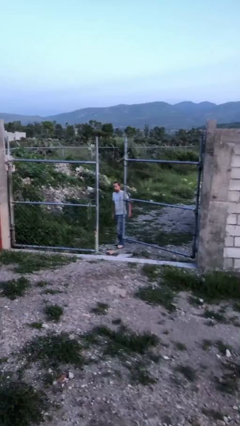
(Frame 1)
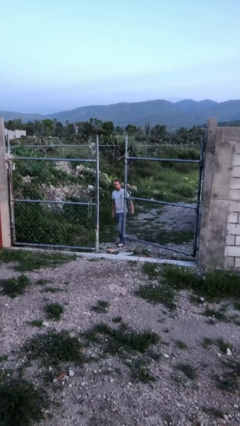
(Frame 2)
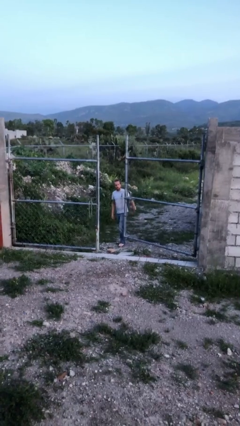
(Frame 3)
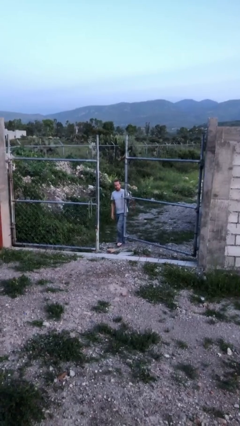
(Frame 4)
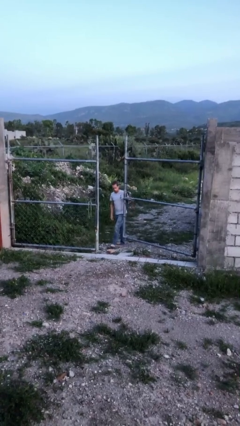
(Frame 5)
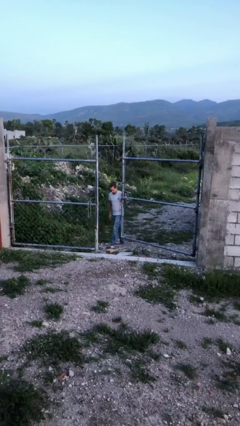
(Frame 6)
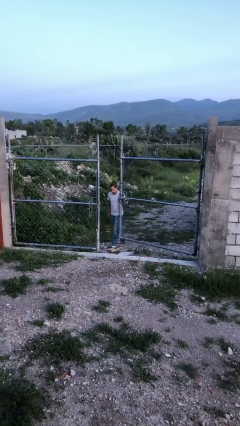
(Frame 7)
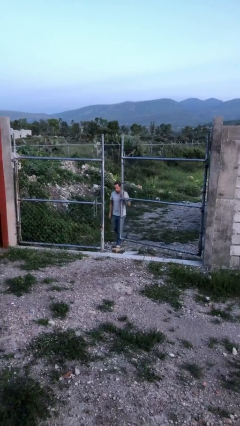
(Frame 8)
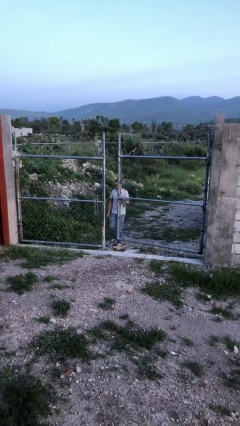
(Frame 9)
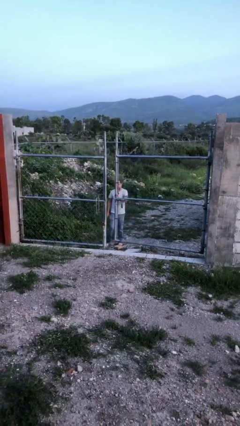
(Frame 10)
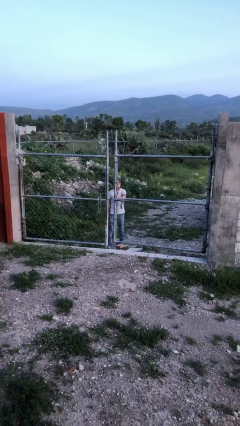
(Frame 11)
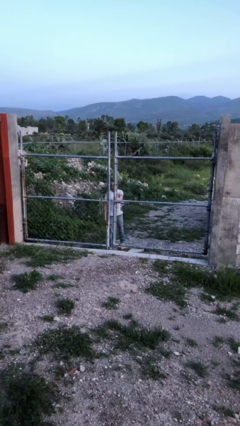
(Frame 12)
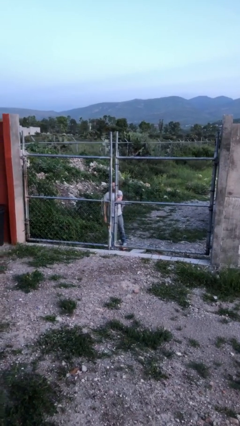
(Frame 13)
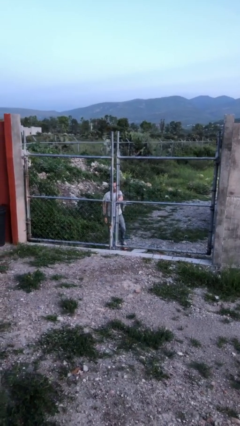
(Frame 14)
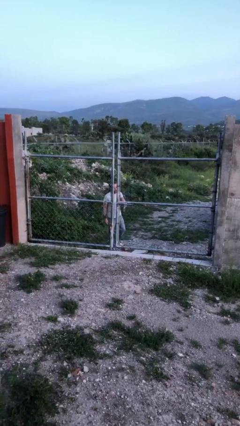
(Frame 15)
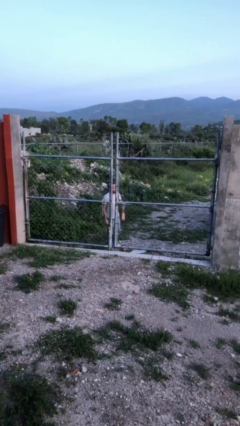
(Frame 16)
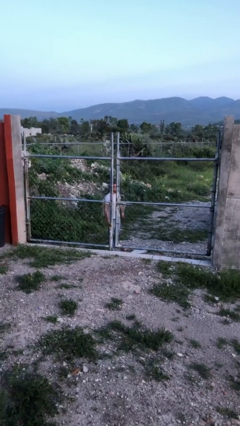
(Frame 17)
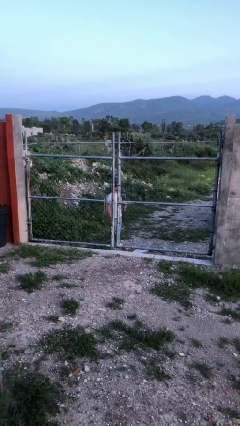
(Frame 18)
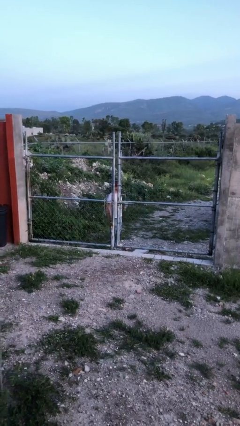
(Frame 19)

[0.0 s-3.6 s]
person closes gate

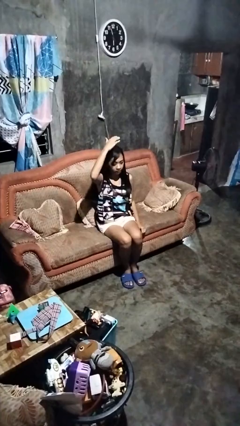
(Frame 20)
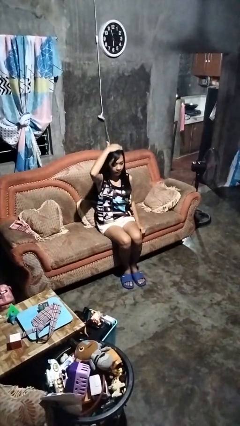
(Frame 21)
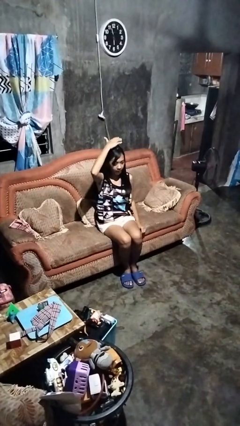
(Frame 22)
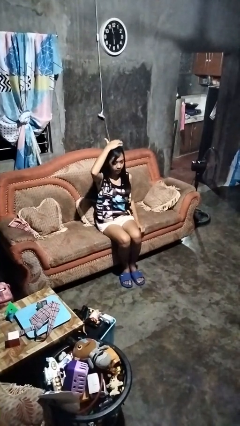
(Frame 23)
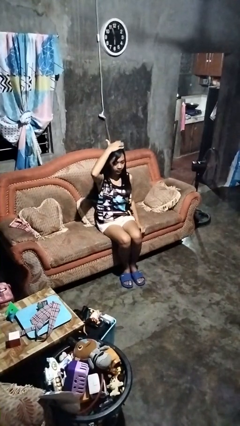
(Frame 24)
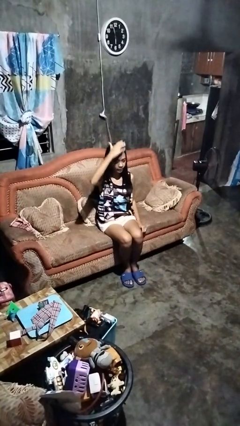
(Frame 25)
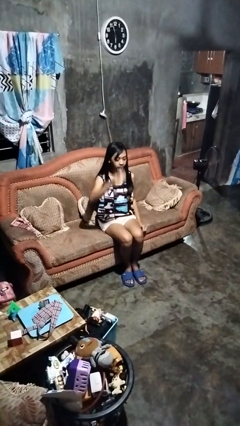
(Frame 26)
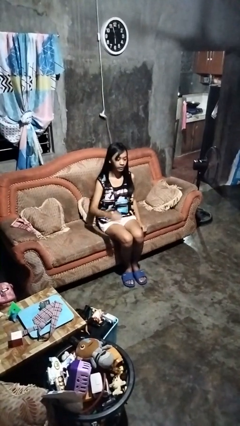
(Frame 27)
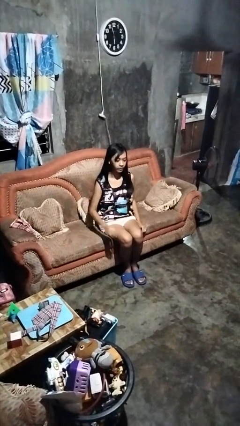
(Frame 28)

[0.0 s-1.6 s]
person pats head

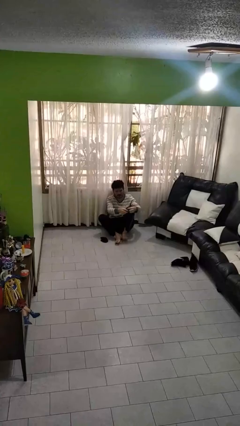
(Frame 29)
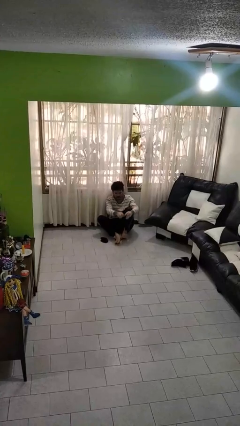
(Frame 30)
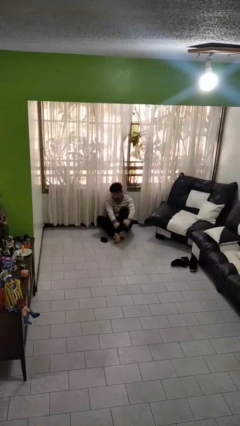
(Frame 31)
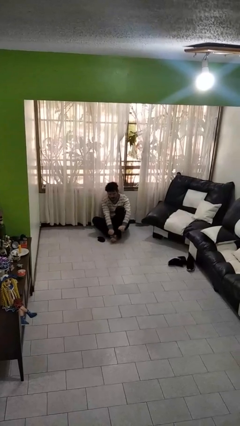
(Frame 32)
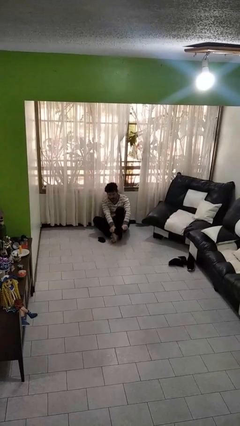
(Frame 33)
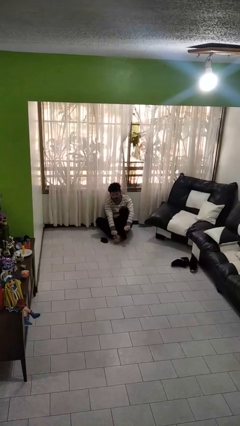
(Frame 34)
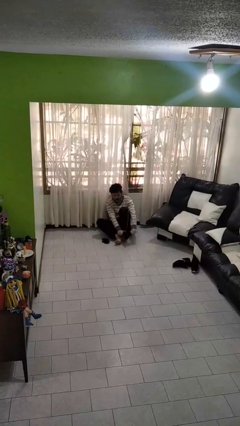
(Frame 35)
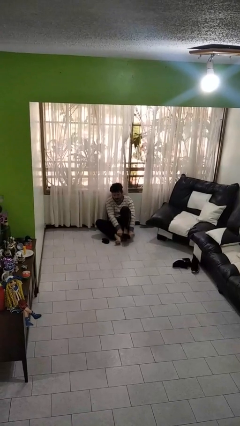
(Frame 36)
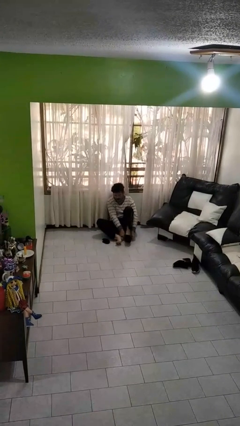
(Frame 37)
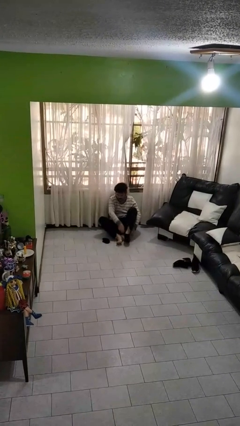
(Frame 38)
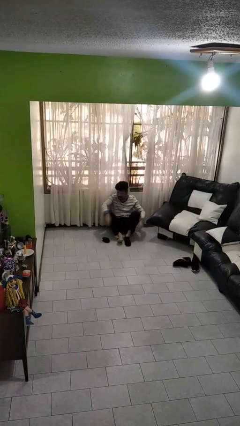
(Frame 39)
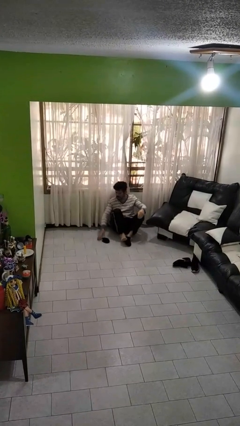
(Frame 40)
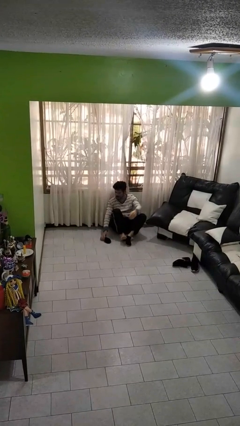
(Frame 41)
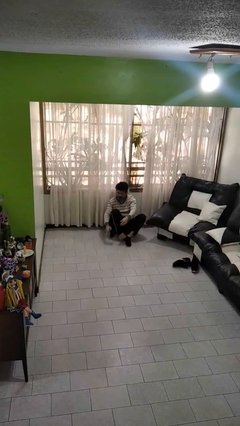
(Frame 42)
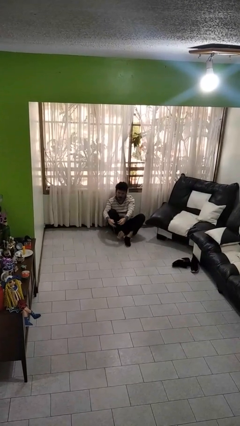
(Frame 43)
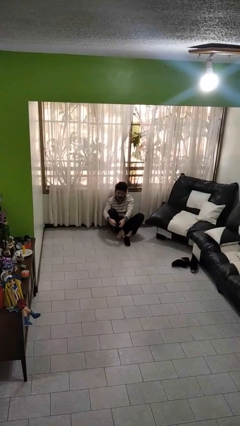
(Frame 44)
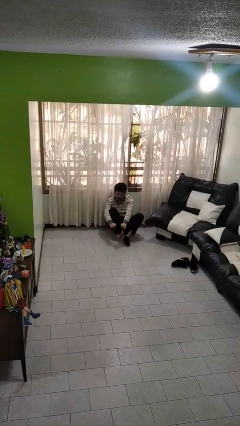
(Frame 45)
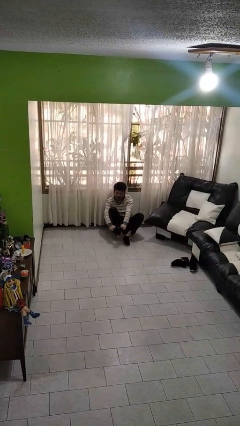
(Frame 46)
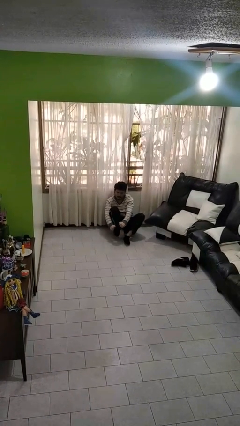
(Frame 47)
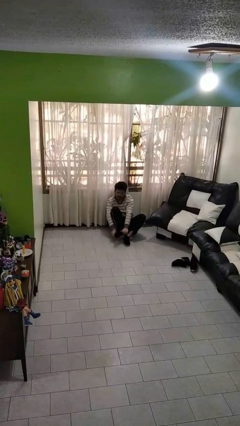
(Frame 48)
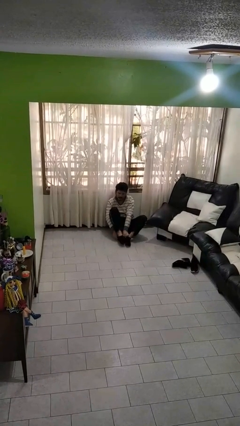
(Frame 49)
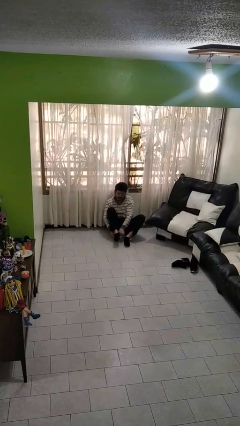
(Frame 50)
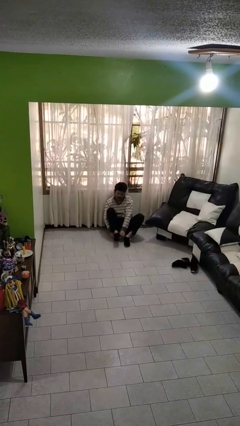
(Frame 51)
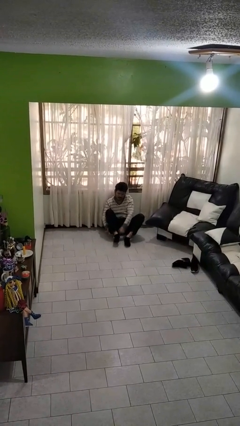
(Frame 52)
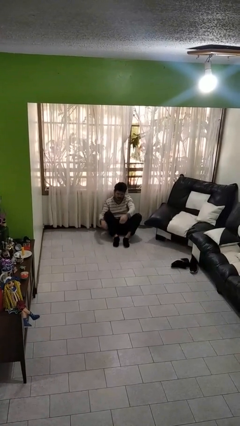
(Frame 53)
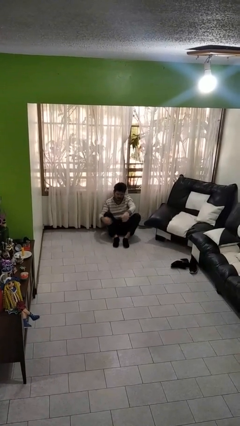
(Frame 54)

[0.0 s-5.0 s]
person puts on socks

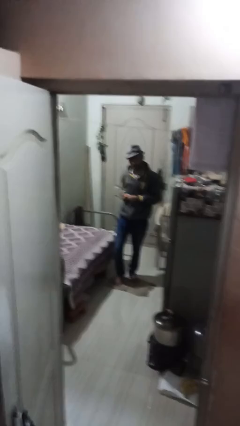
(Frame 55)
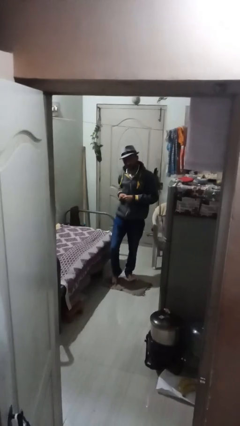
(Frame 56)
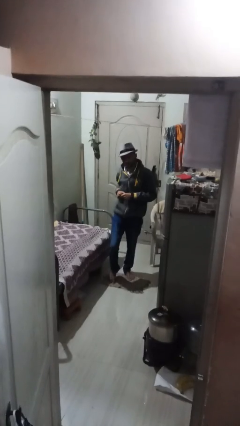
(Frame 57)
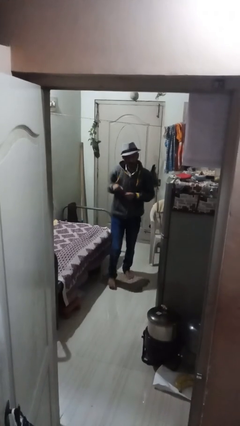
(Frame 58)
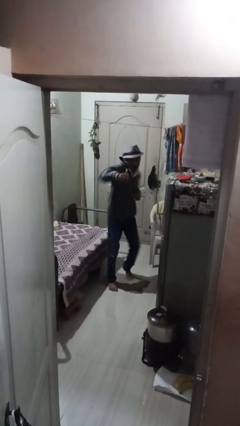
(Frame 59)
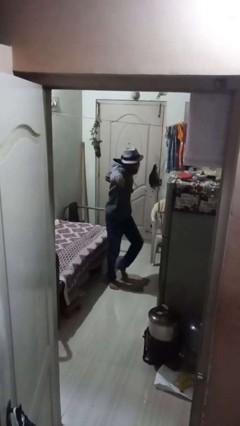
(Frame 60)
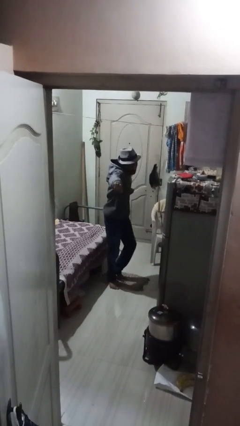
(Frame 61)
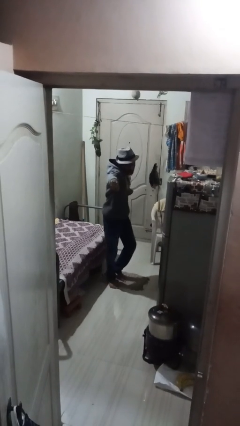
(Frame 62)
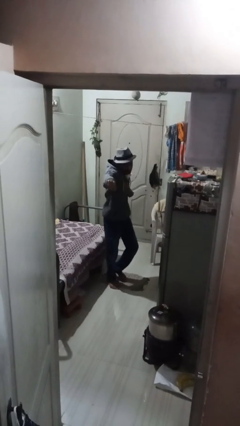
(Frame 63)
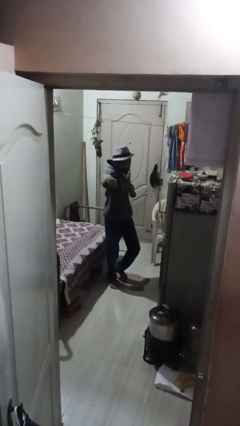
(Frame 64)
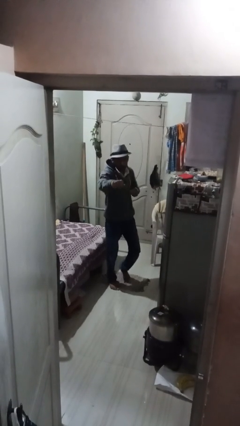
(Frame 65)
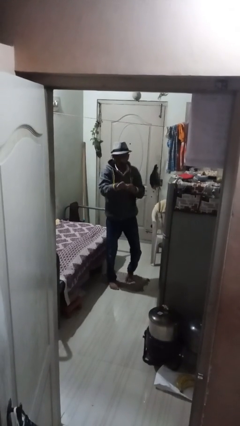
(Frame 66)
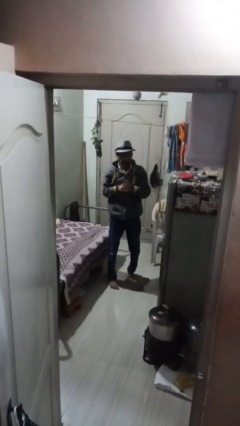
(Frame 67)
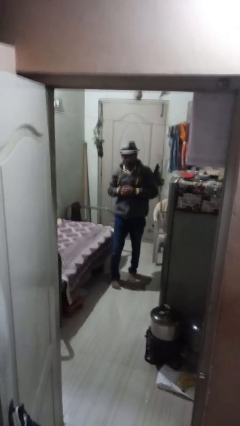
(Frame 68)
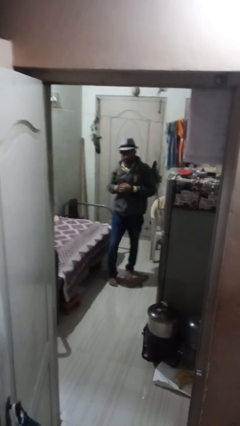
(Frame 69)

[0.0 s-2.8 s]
person punches

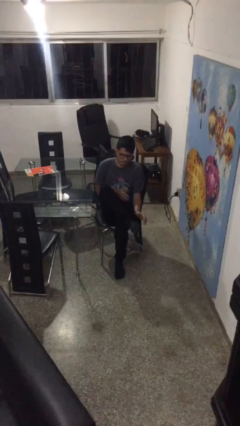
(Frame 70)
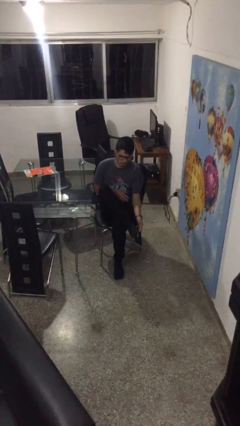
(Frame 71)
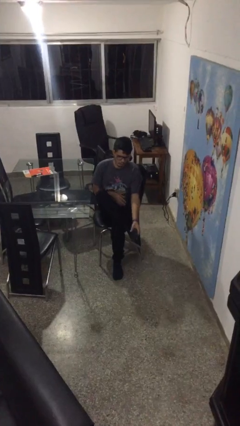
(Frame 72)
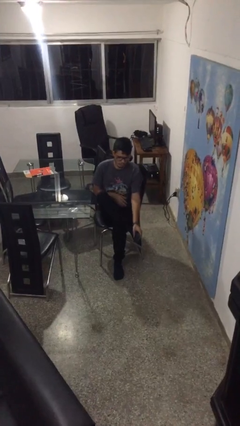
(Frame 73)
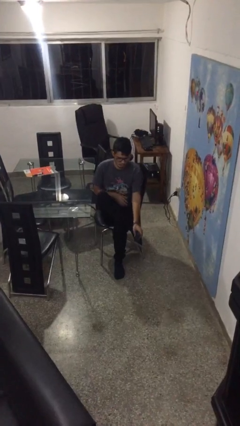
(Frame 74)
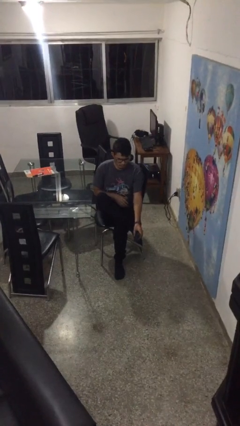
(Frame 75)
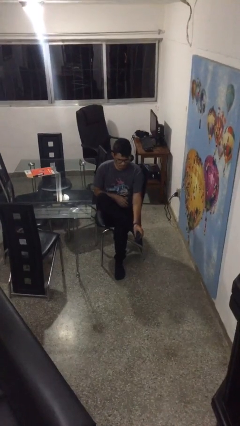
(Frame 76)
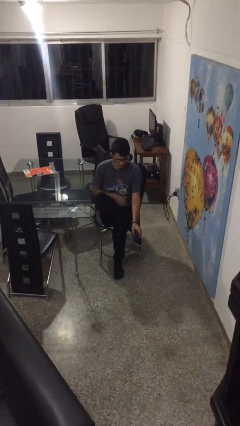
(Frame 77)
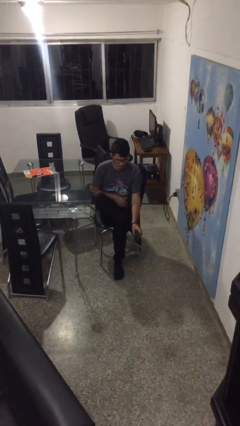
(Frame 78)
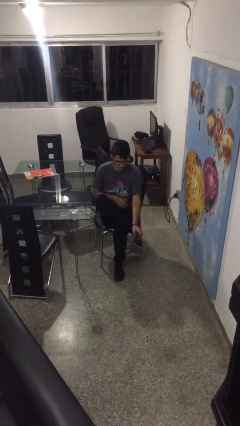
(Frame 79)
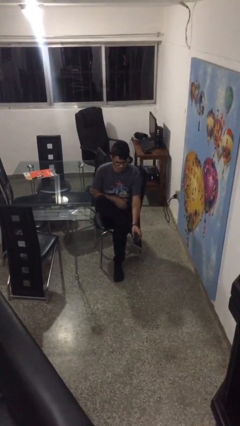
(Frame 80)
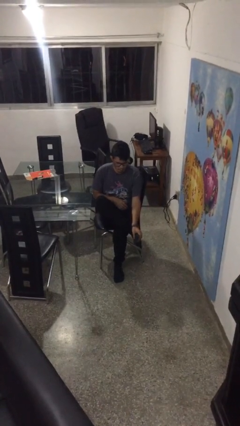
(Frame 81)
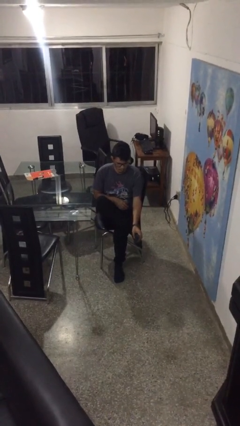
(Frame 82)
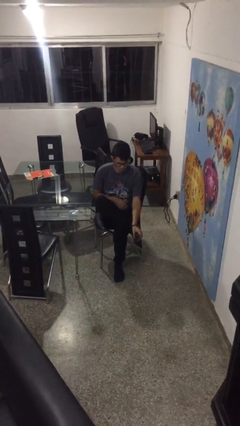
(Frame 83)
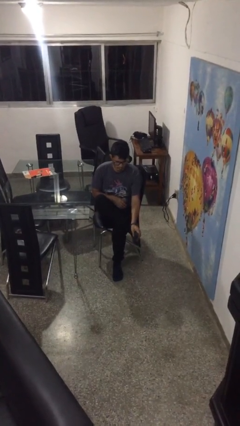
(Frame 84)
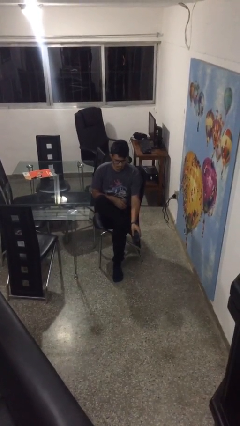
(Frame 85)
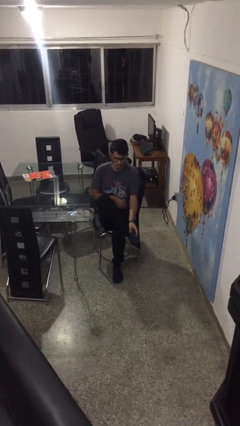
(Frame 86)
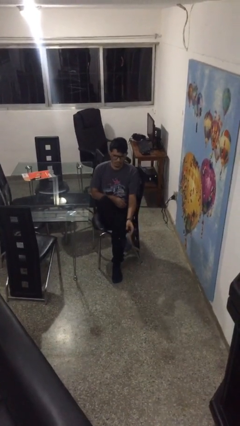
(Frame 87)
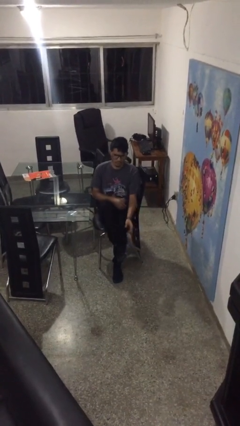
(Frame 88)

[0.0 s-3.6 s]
person rubs foot

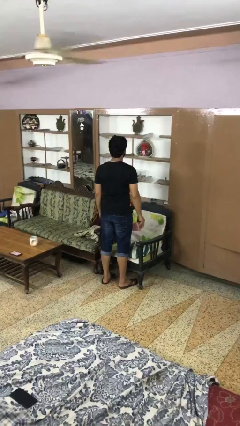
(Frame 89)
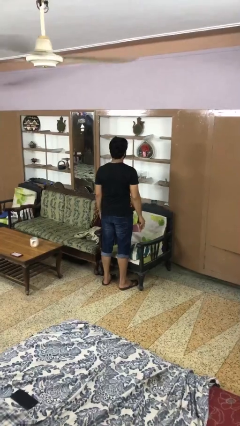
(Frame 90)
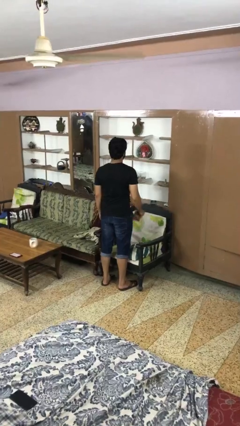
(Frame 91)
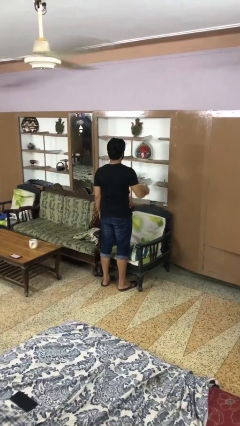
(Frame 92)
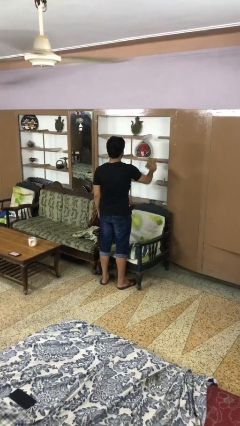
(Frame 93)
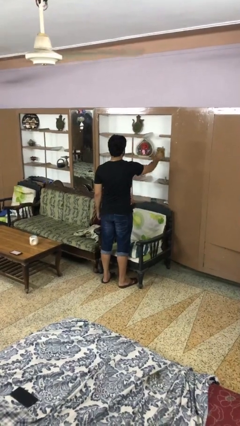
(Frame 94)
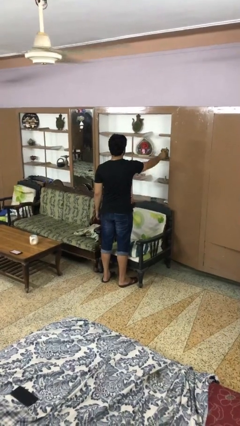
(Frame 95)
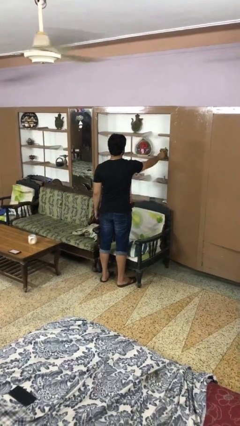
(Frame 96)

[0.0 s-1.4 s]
person puts down object on shelf
